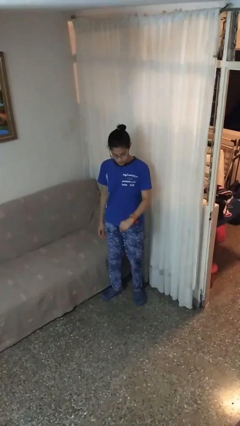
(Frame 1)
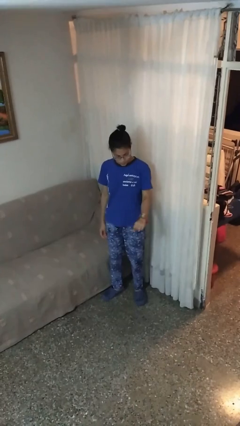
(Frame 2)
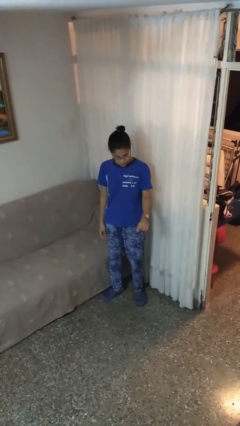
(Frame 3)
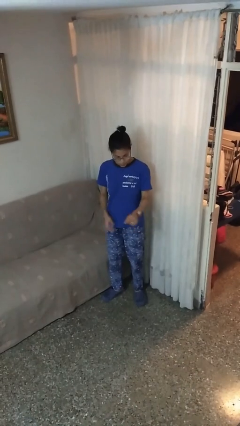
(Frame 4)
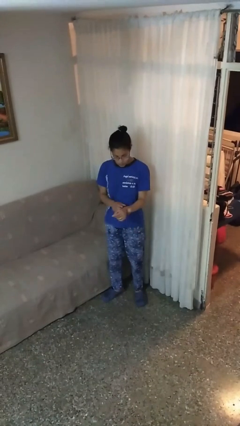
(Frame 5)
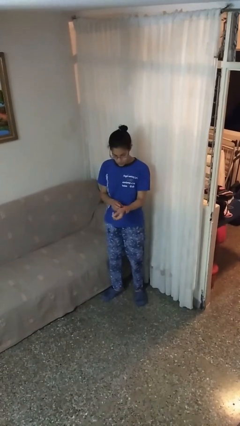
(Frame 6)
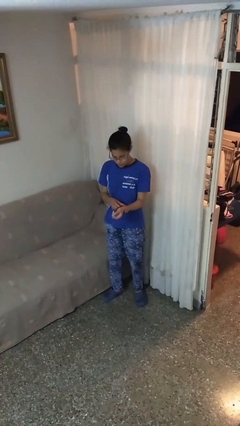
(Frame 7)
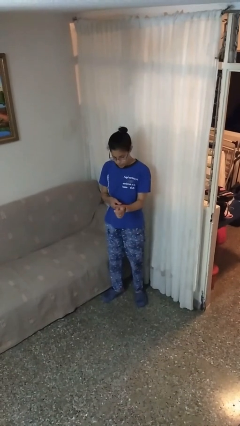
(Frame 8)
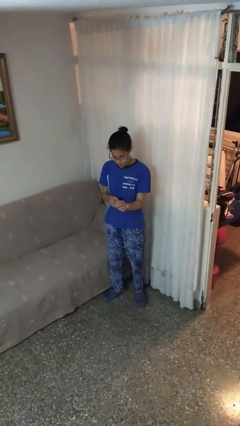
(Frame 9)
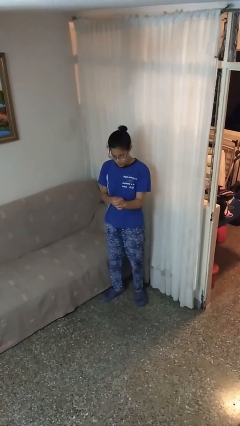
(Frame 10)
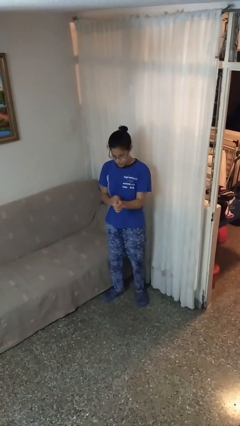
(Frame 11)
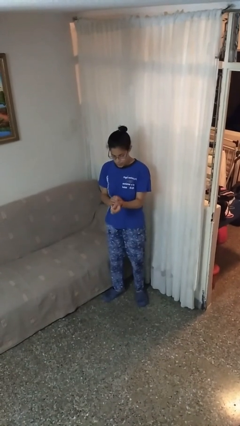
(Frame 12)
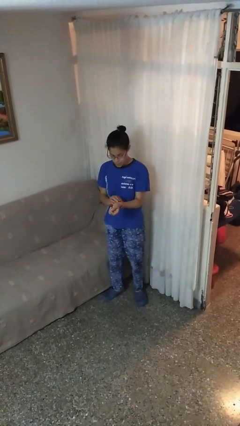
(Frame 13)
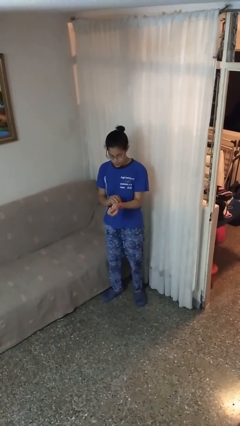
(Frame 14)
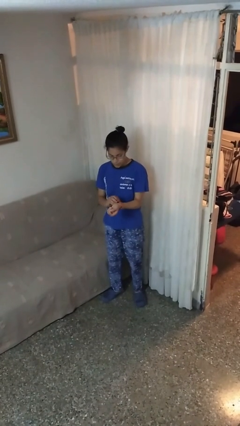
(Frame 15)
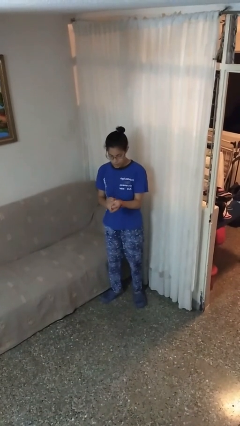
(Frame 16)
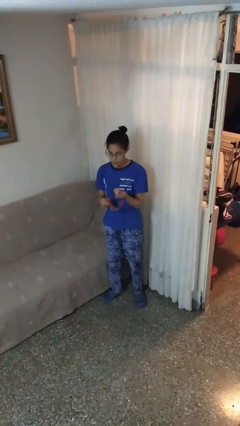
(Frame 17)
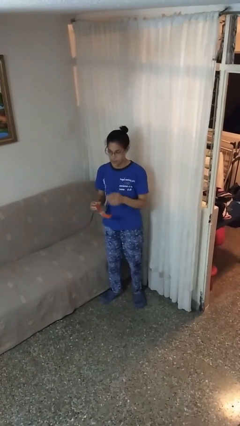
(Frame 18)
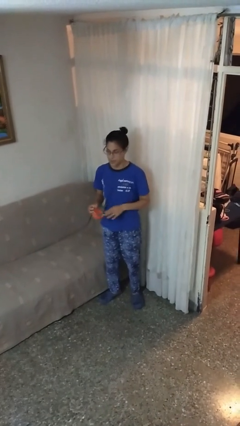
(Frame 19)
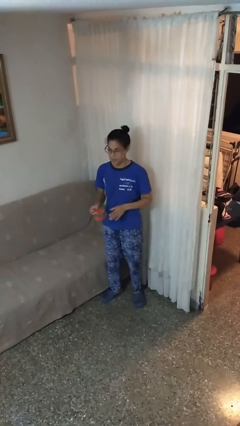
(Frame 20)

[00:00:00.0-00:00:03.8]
person takes off wristwatch

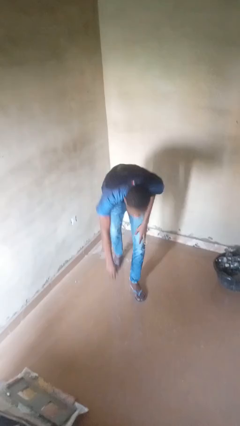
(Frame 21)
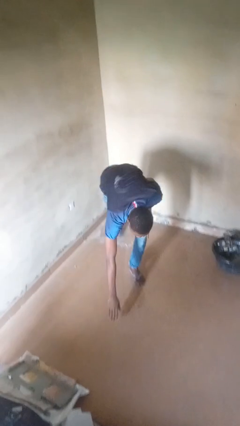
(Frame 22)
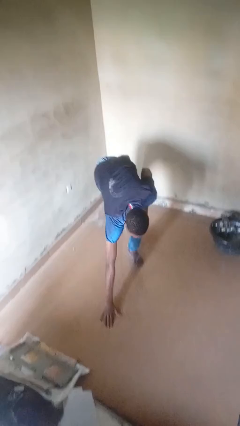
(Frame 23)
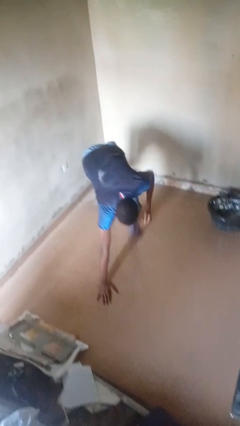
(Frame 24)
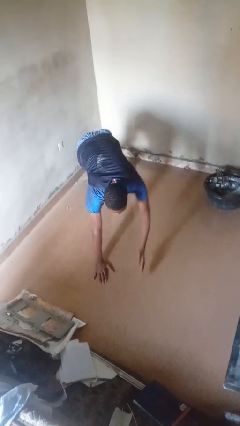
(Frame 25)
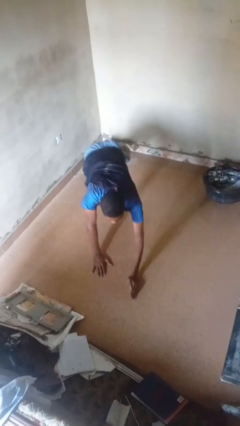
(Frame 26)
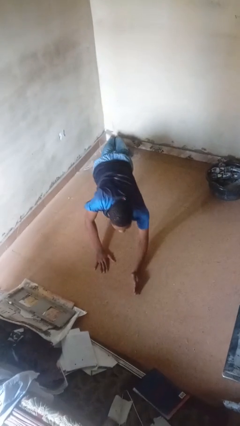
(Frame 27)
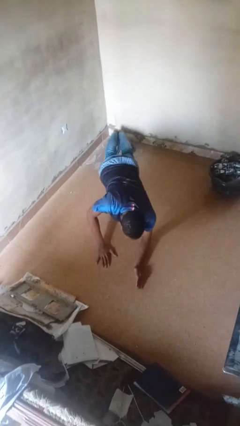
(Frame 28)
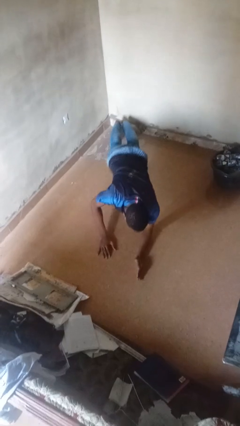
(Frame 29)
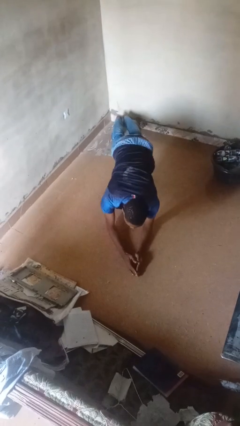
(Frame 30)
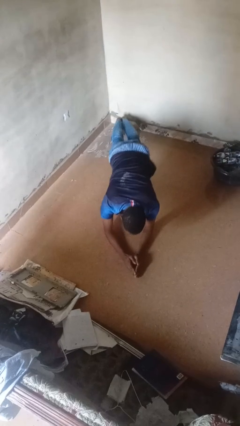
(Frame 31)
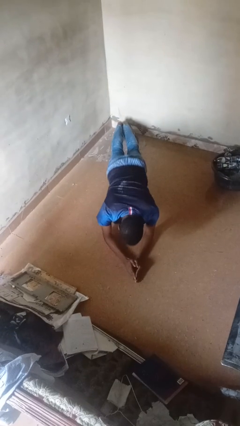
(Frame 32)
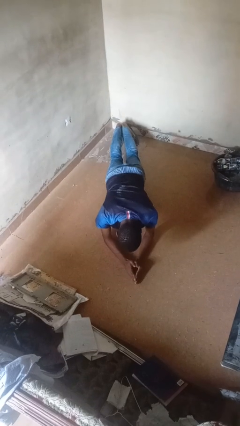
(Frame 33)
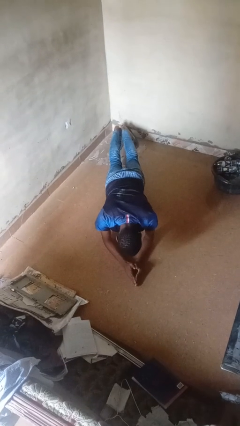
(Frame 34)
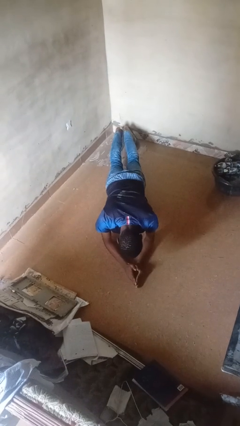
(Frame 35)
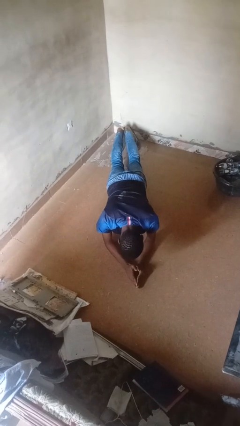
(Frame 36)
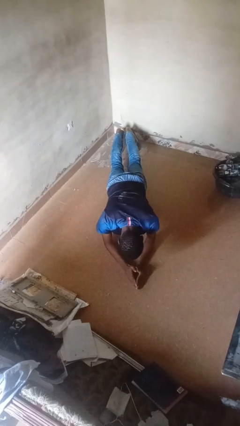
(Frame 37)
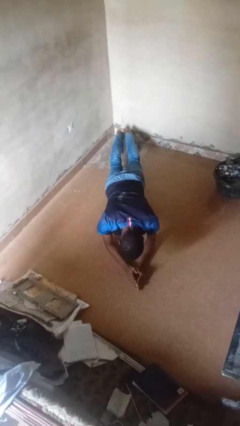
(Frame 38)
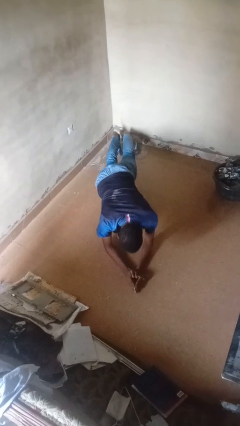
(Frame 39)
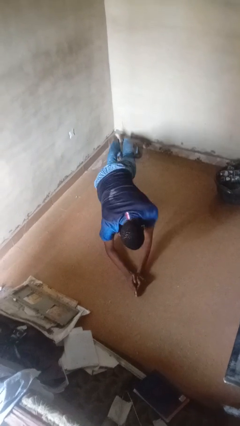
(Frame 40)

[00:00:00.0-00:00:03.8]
person exercises with plank

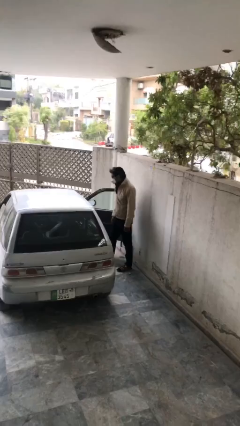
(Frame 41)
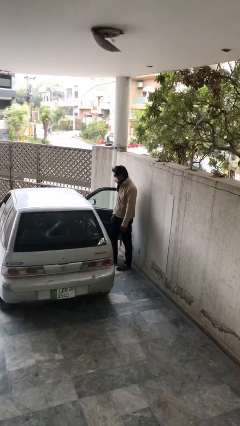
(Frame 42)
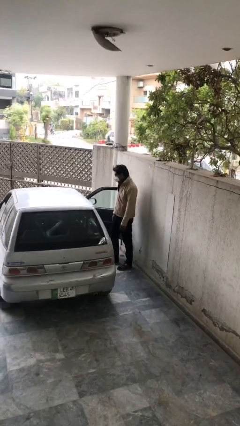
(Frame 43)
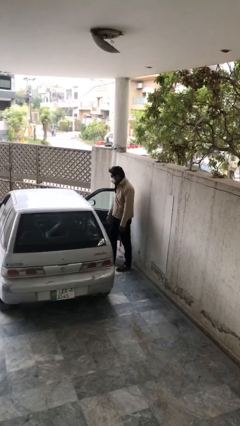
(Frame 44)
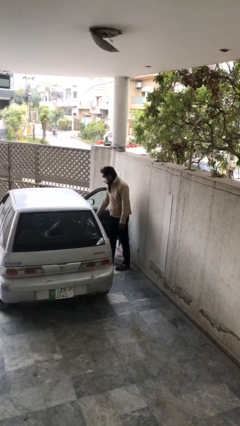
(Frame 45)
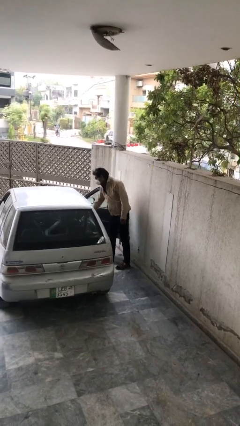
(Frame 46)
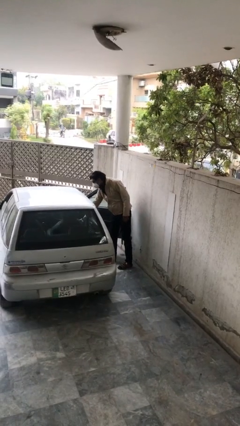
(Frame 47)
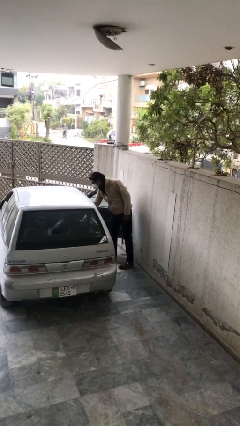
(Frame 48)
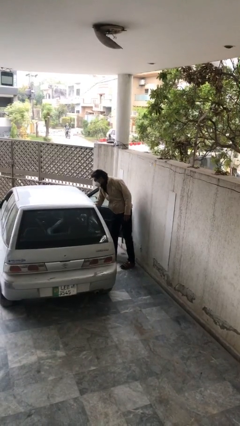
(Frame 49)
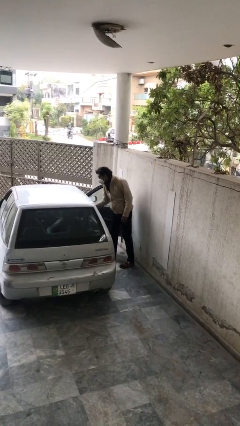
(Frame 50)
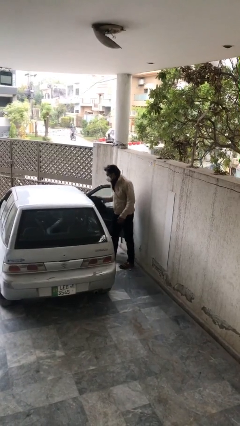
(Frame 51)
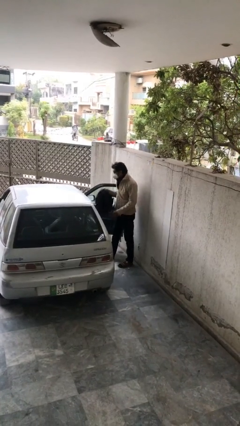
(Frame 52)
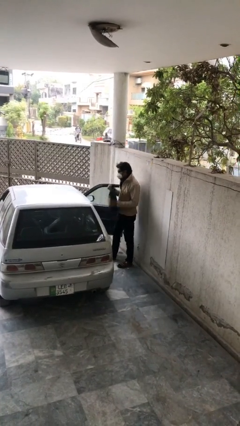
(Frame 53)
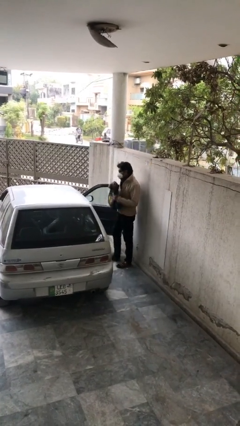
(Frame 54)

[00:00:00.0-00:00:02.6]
person unloads car

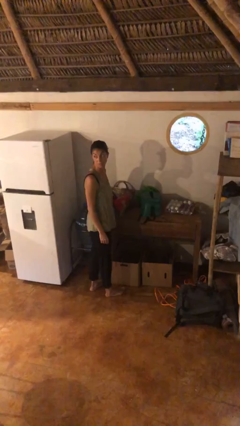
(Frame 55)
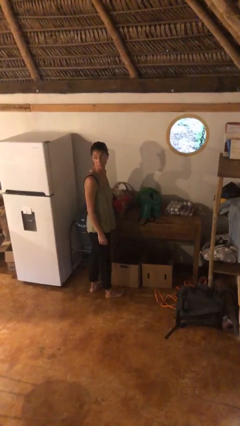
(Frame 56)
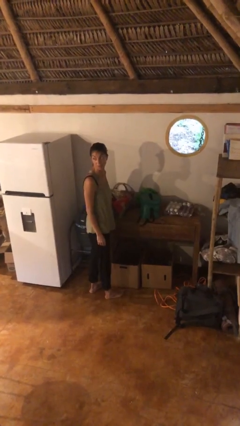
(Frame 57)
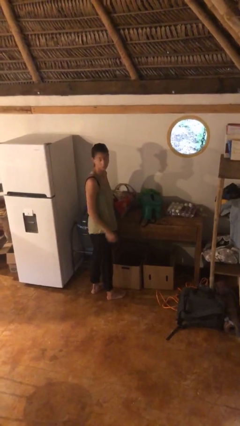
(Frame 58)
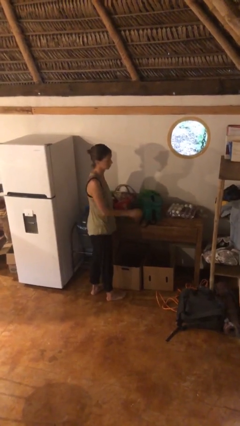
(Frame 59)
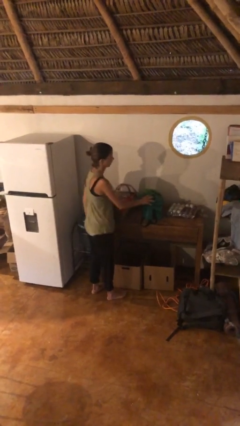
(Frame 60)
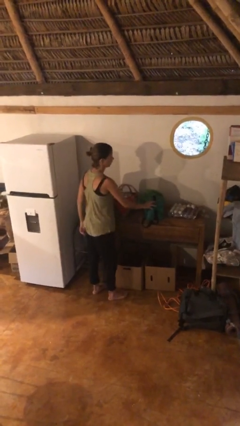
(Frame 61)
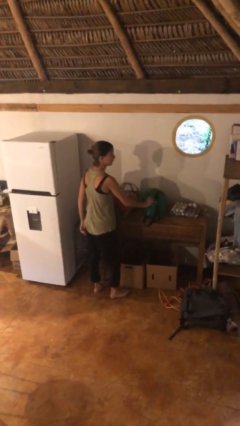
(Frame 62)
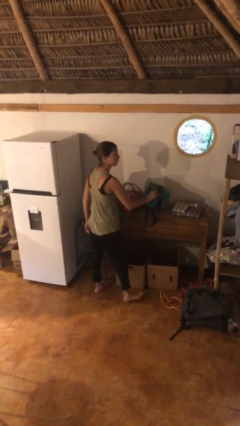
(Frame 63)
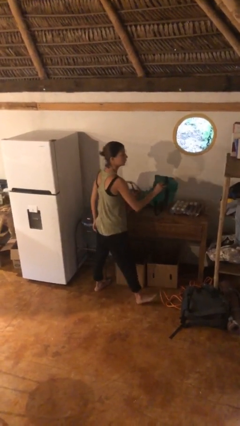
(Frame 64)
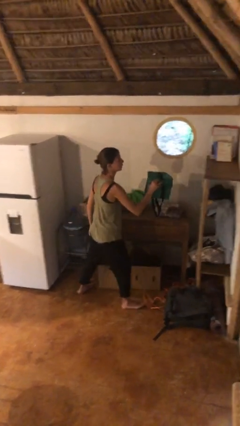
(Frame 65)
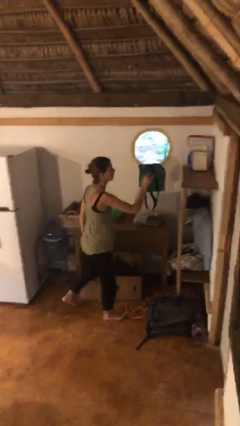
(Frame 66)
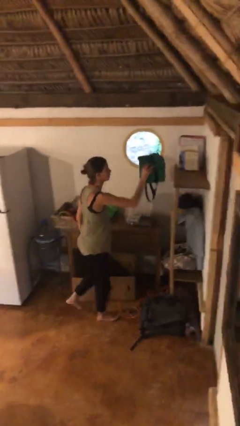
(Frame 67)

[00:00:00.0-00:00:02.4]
person picks up object from table

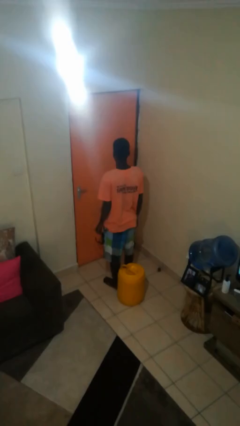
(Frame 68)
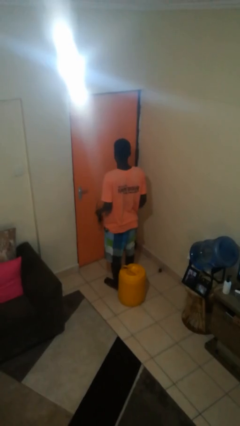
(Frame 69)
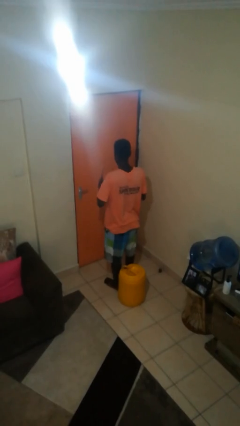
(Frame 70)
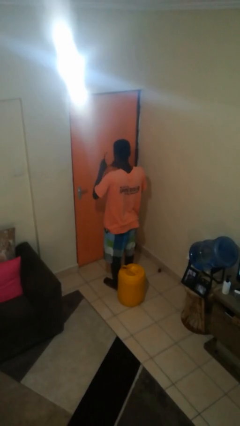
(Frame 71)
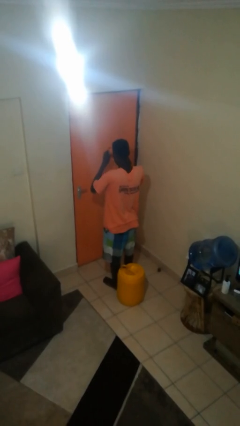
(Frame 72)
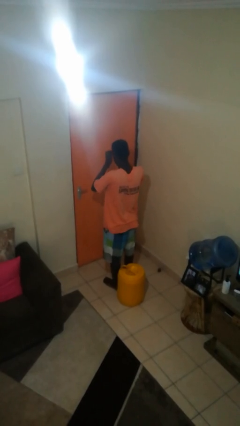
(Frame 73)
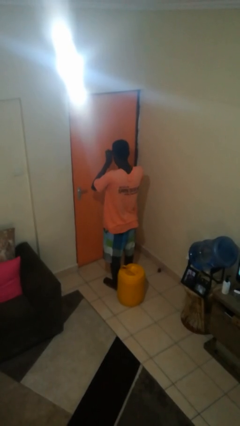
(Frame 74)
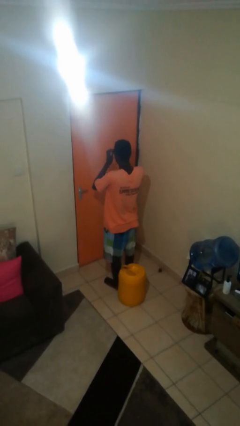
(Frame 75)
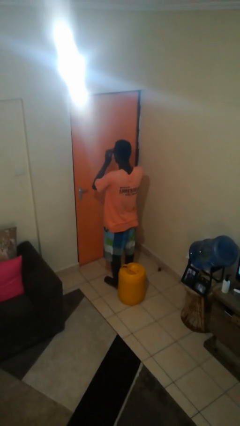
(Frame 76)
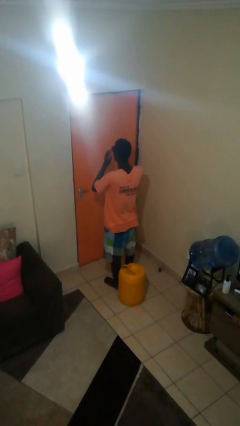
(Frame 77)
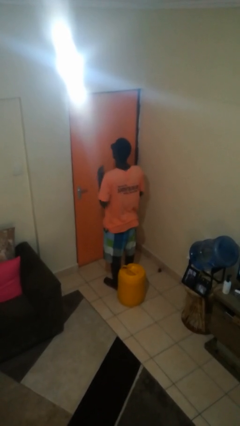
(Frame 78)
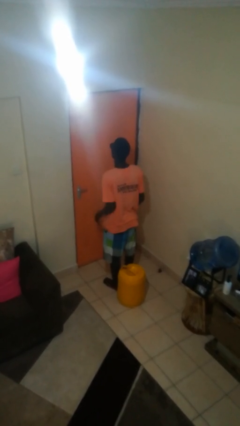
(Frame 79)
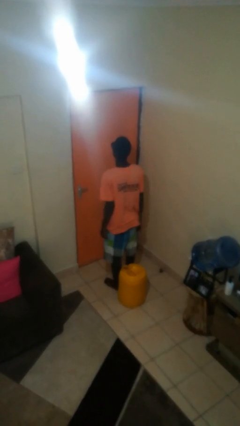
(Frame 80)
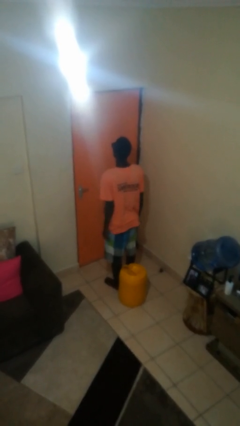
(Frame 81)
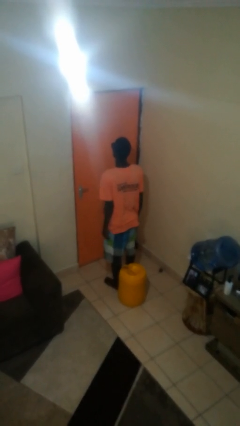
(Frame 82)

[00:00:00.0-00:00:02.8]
person puts on sunglasses

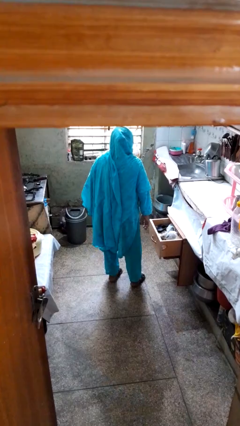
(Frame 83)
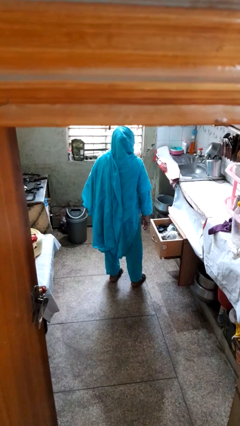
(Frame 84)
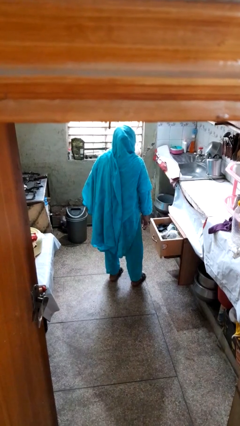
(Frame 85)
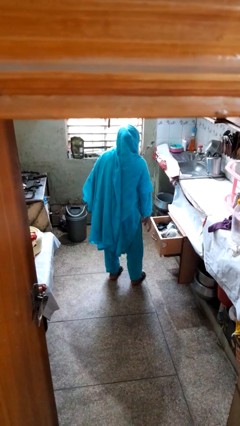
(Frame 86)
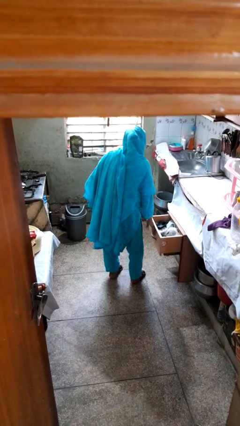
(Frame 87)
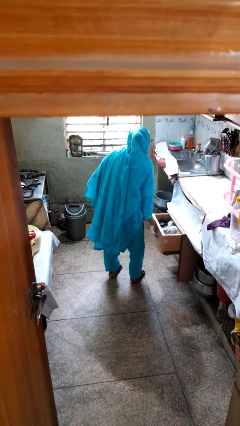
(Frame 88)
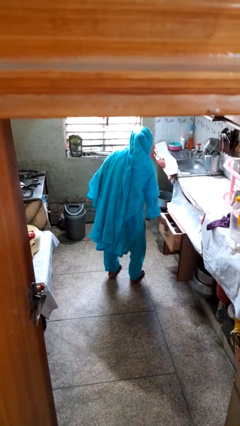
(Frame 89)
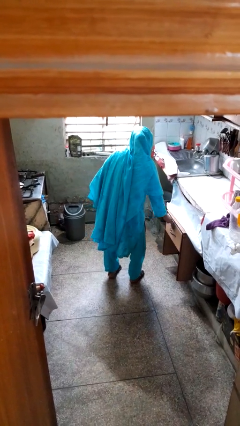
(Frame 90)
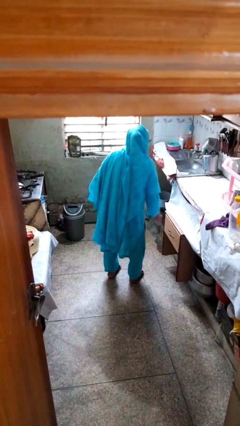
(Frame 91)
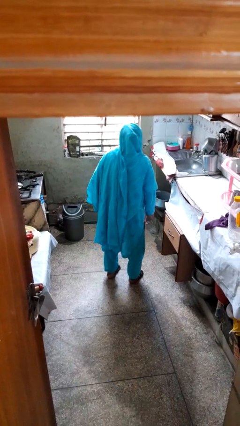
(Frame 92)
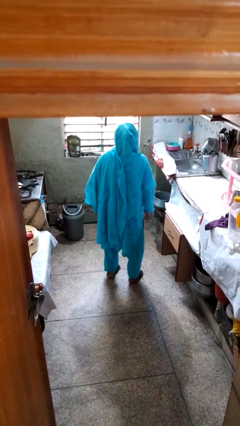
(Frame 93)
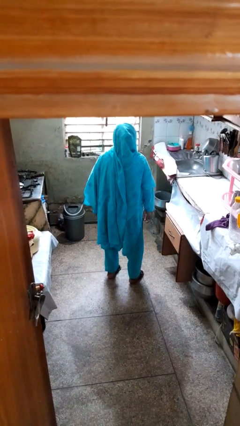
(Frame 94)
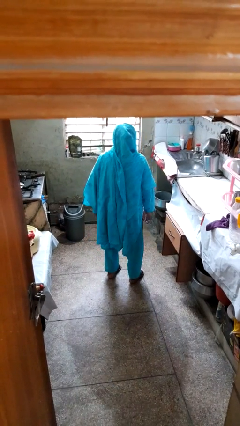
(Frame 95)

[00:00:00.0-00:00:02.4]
person closes kitchen drawer
